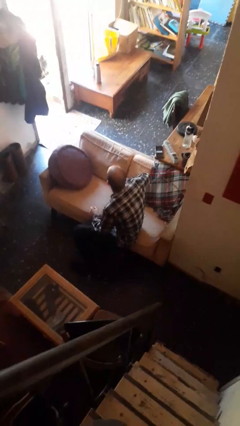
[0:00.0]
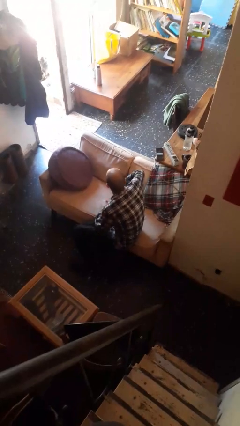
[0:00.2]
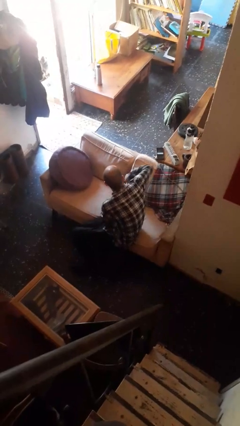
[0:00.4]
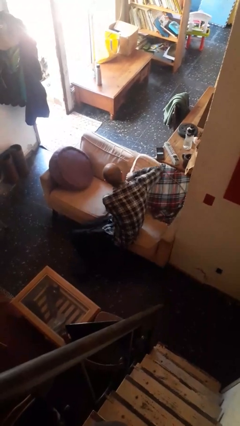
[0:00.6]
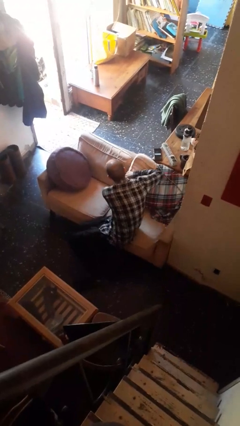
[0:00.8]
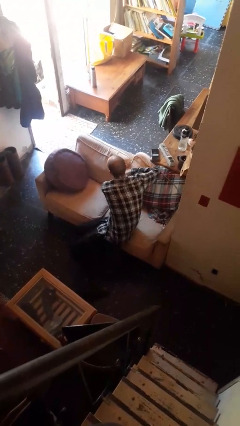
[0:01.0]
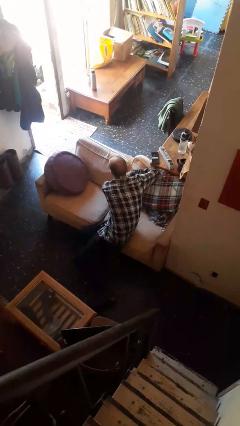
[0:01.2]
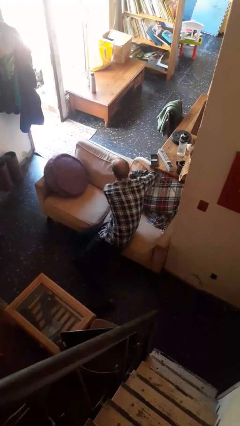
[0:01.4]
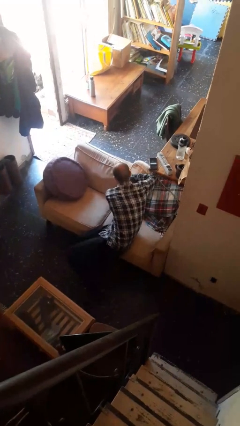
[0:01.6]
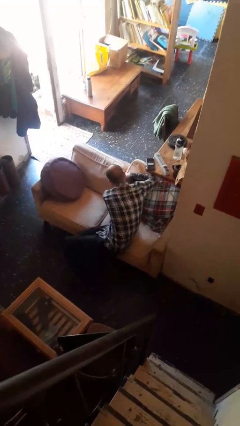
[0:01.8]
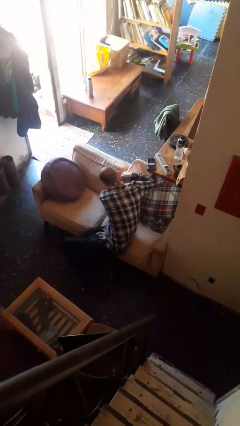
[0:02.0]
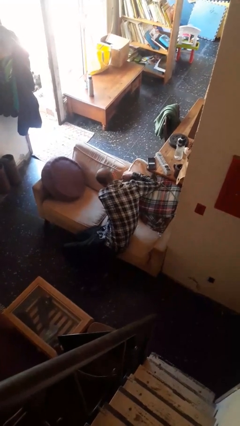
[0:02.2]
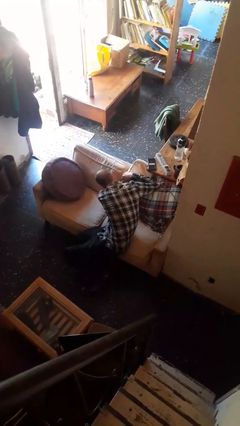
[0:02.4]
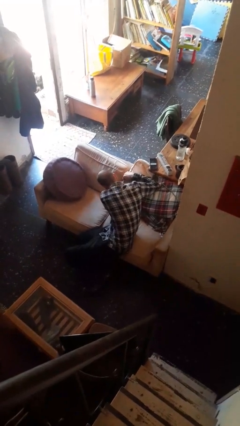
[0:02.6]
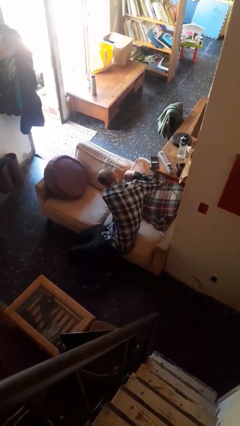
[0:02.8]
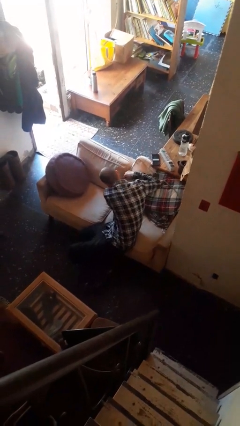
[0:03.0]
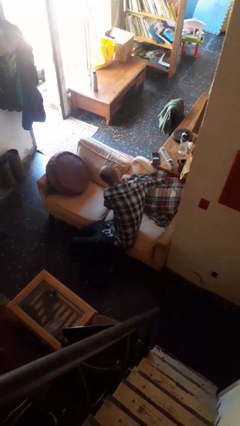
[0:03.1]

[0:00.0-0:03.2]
person searches in couch

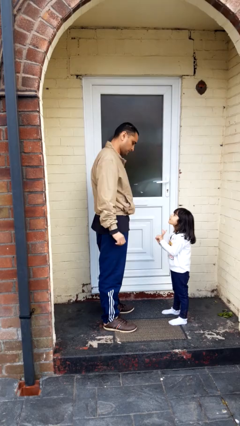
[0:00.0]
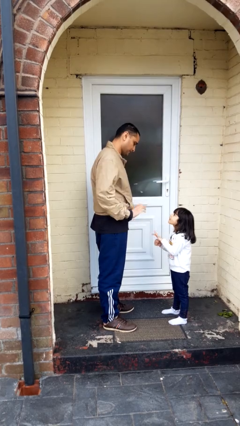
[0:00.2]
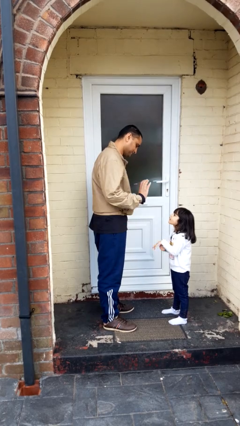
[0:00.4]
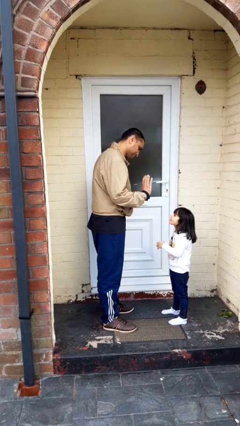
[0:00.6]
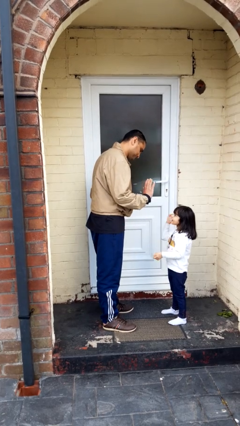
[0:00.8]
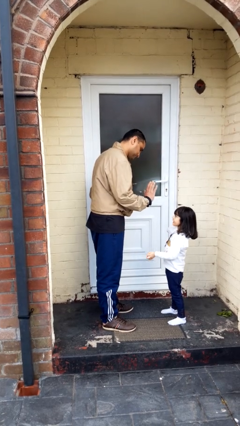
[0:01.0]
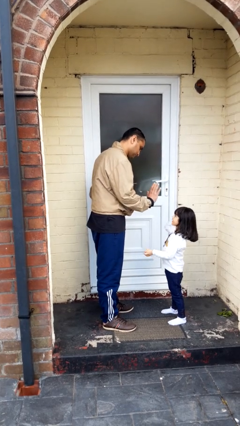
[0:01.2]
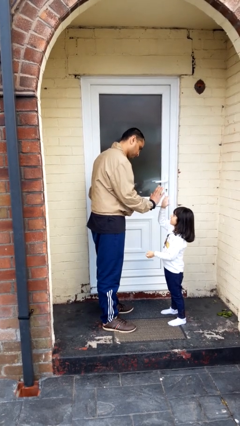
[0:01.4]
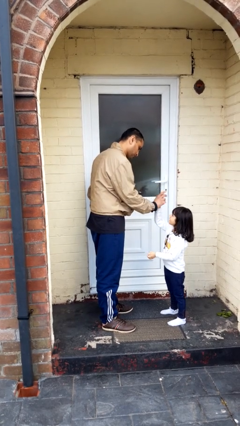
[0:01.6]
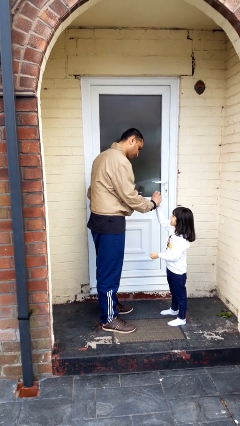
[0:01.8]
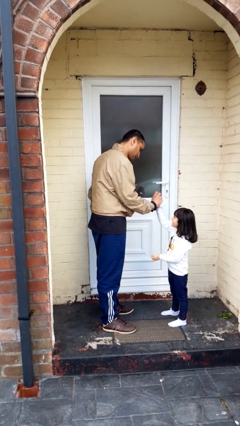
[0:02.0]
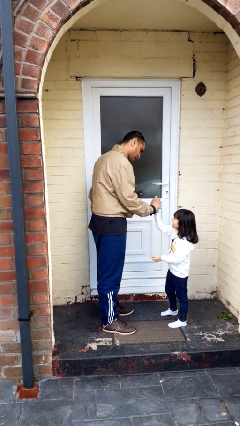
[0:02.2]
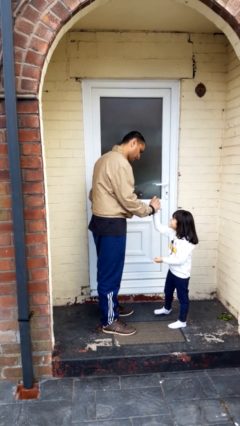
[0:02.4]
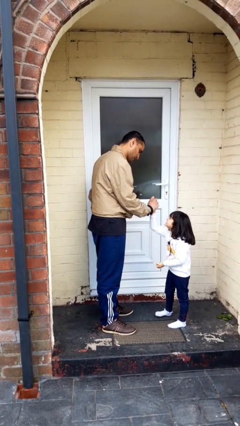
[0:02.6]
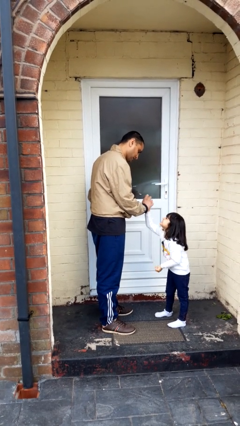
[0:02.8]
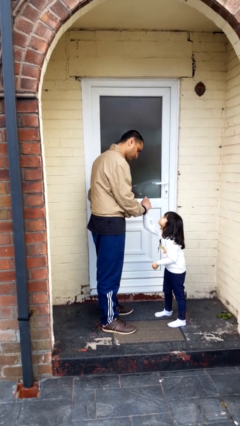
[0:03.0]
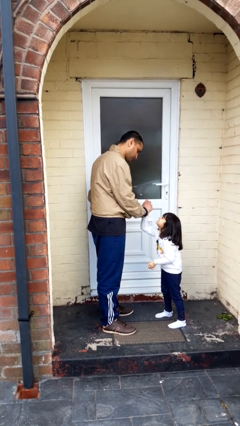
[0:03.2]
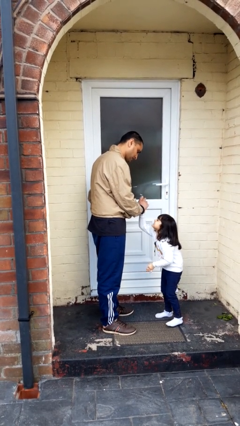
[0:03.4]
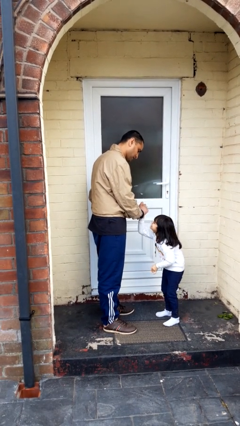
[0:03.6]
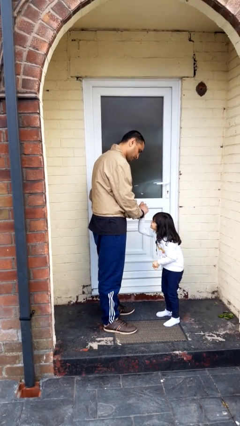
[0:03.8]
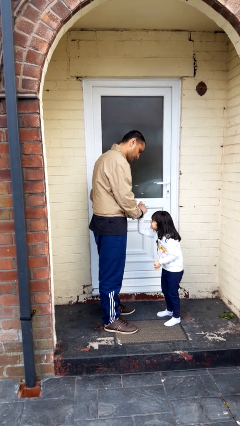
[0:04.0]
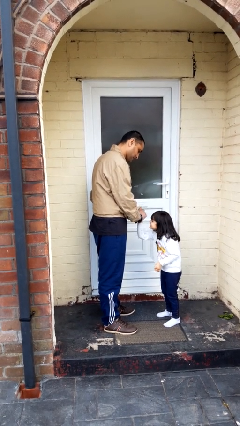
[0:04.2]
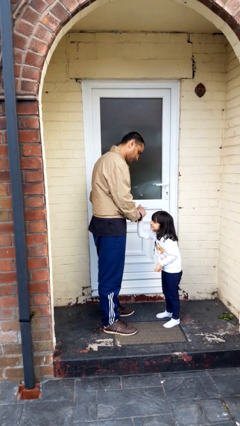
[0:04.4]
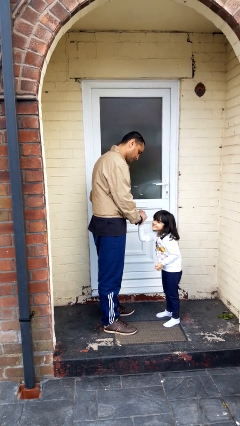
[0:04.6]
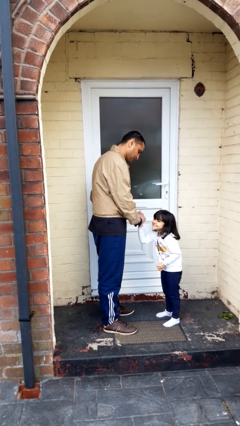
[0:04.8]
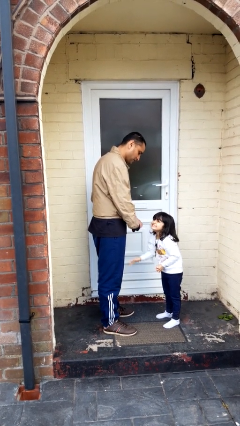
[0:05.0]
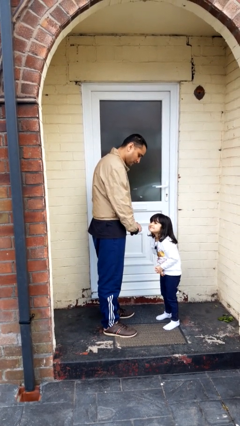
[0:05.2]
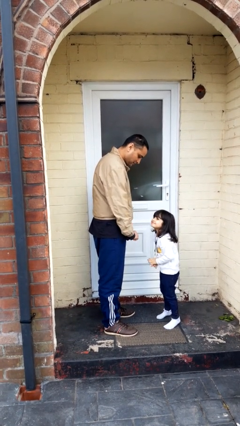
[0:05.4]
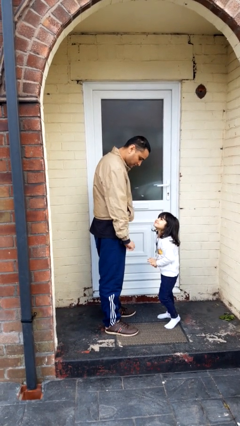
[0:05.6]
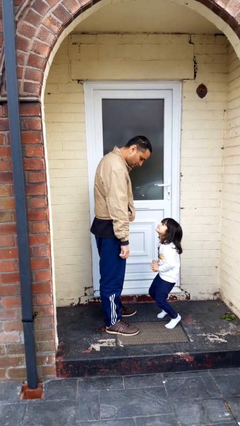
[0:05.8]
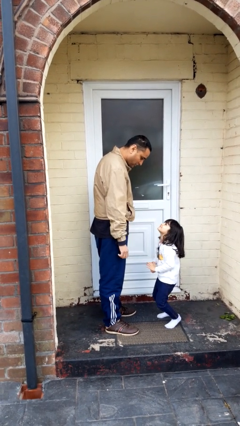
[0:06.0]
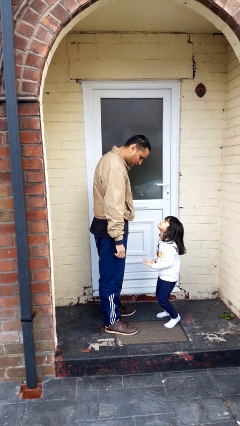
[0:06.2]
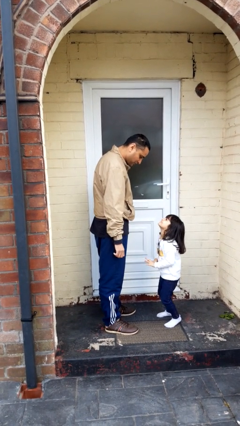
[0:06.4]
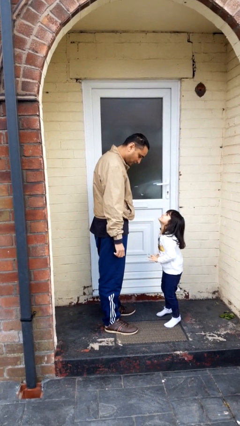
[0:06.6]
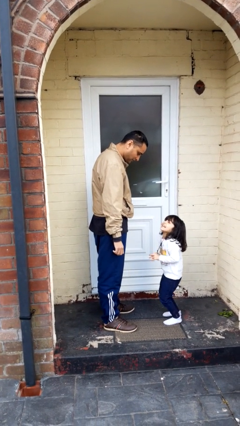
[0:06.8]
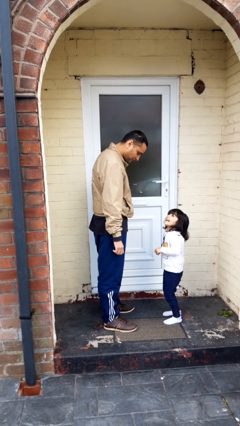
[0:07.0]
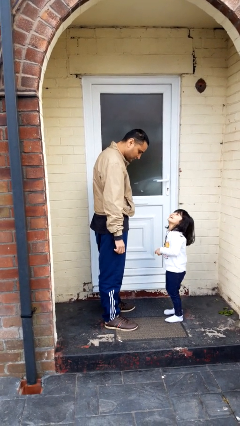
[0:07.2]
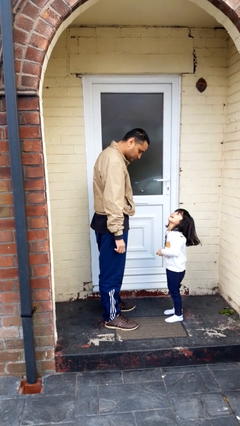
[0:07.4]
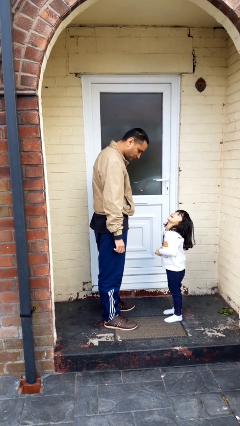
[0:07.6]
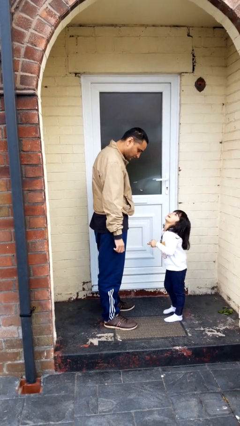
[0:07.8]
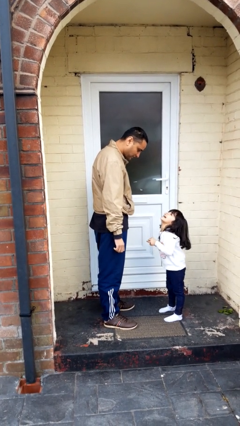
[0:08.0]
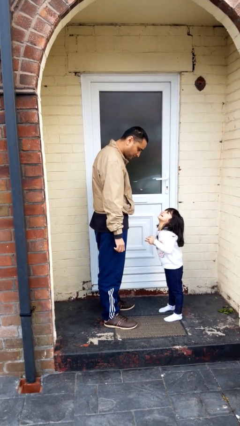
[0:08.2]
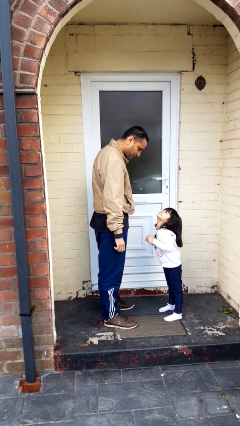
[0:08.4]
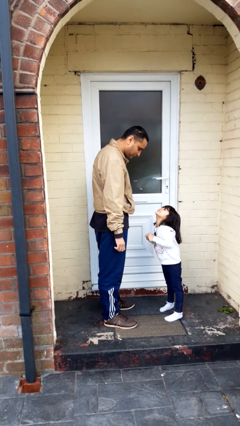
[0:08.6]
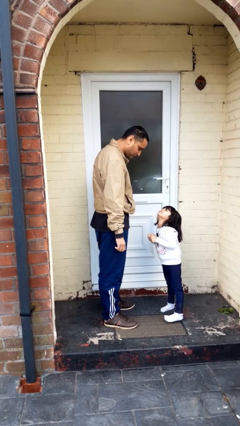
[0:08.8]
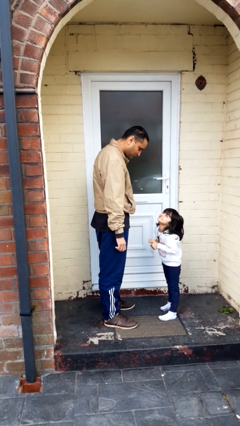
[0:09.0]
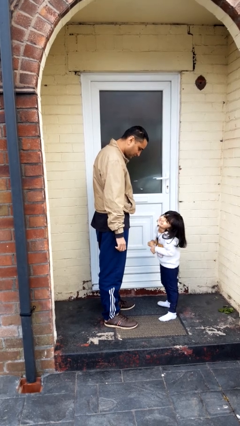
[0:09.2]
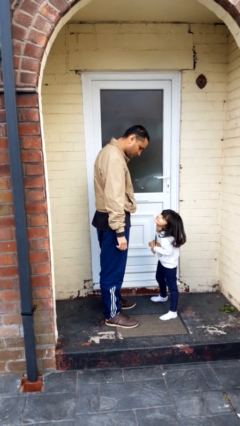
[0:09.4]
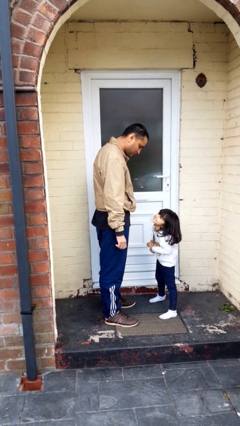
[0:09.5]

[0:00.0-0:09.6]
person highfives hand

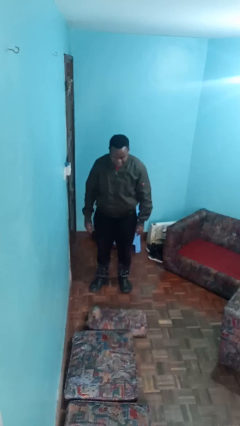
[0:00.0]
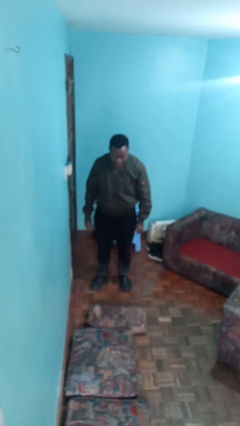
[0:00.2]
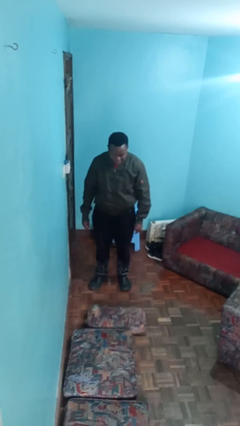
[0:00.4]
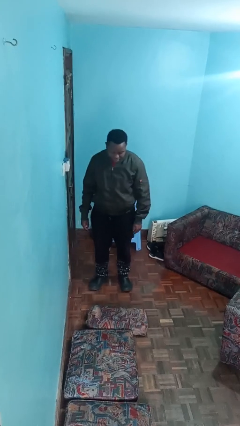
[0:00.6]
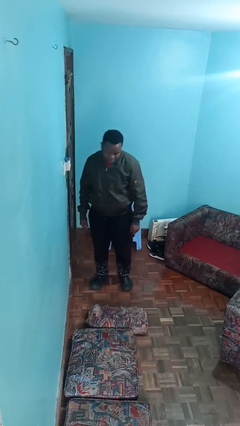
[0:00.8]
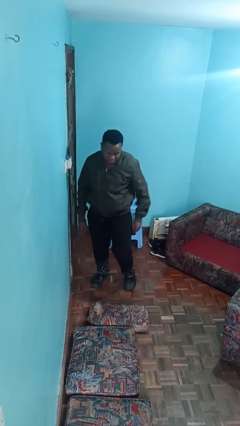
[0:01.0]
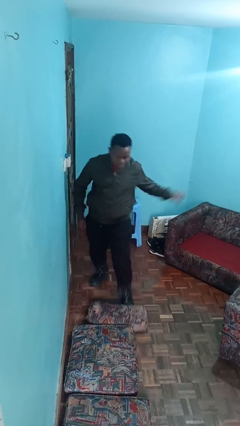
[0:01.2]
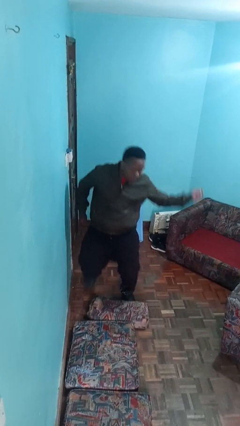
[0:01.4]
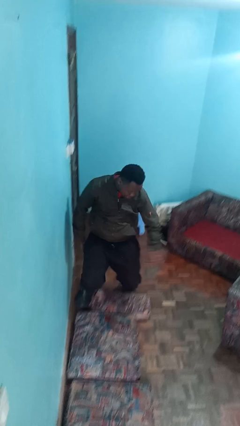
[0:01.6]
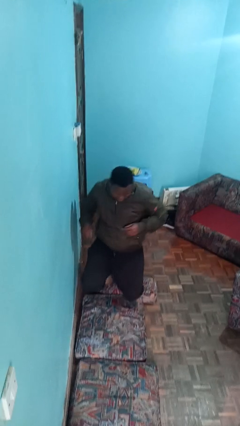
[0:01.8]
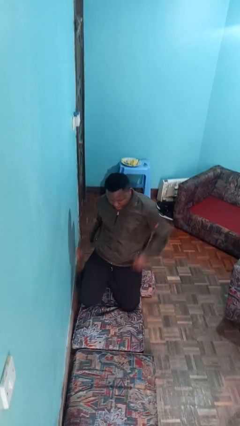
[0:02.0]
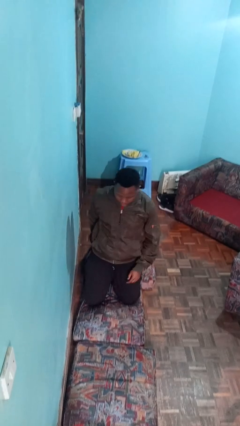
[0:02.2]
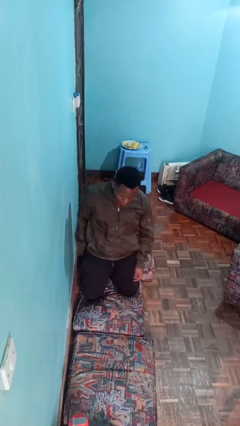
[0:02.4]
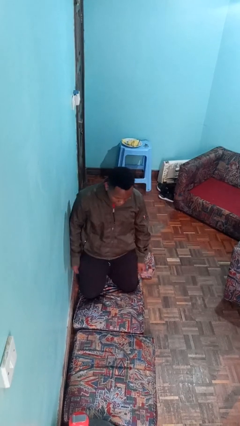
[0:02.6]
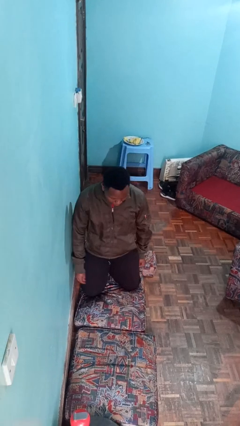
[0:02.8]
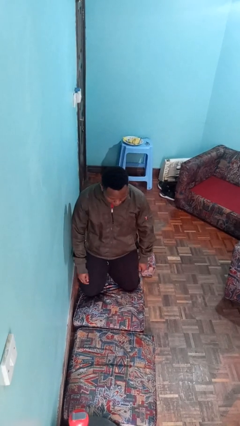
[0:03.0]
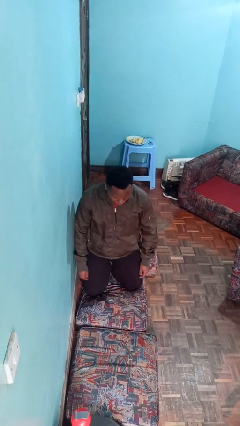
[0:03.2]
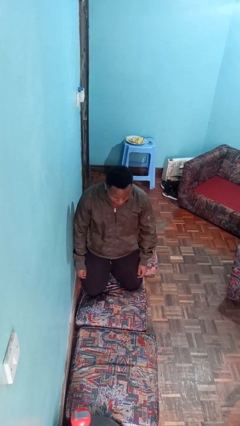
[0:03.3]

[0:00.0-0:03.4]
person trips on object on floor

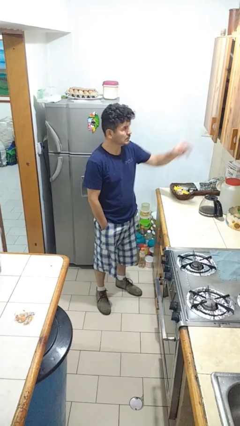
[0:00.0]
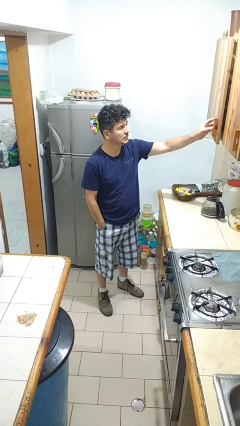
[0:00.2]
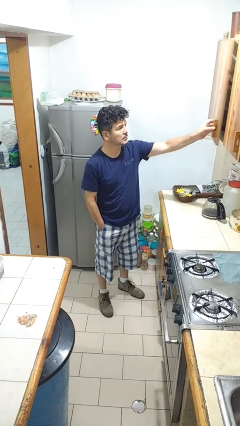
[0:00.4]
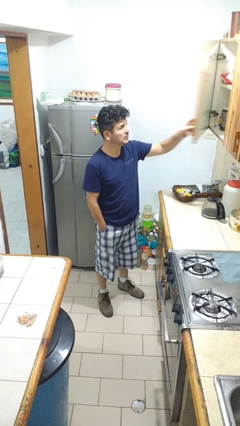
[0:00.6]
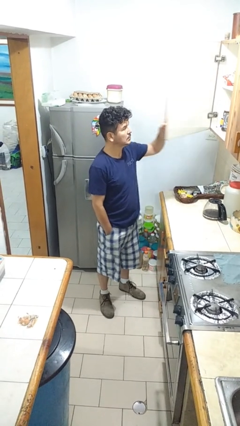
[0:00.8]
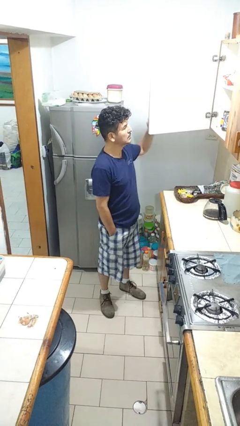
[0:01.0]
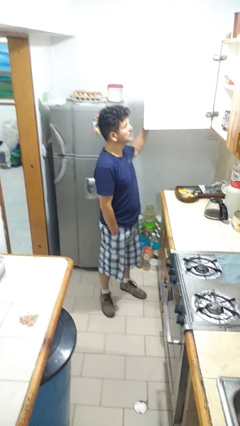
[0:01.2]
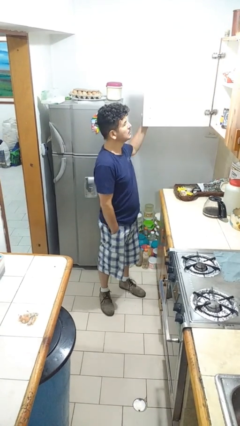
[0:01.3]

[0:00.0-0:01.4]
person opens cabinet
